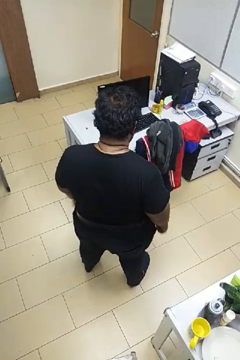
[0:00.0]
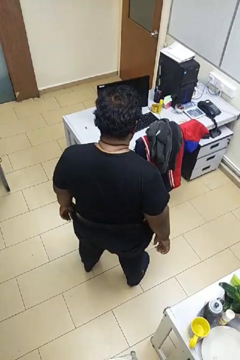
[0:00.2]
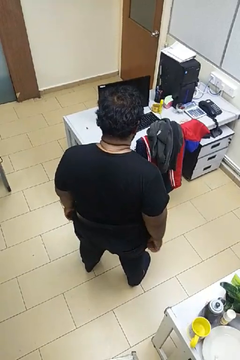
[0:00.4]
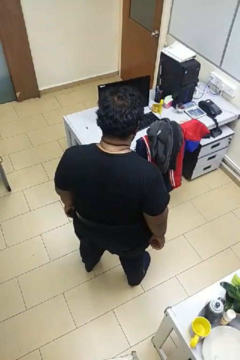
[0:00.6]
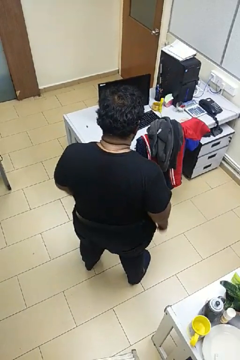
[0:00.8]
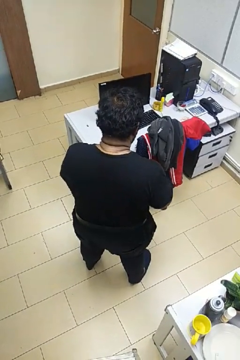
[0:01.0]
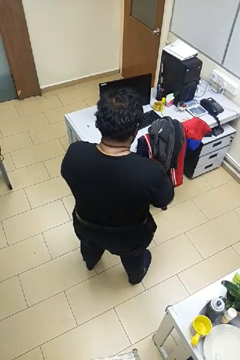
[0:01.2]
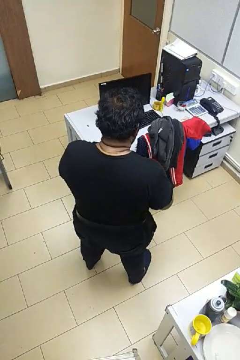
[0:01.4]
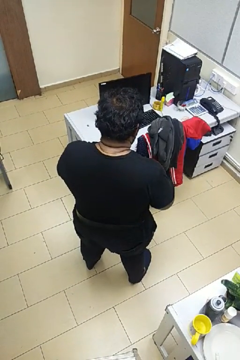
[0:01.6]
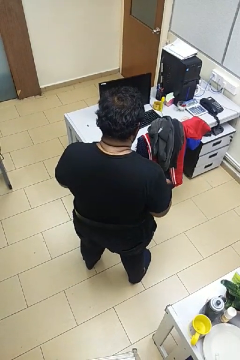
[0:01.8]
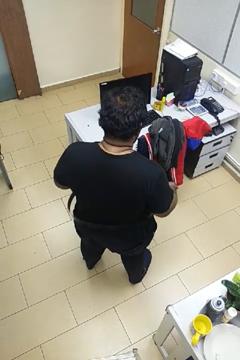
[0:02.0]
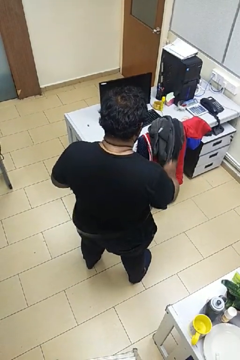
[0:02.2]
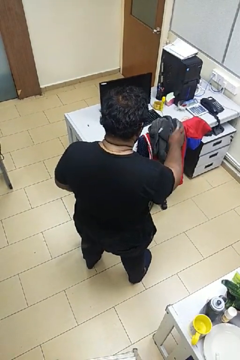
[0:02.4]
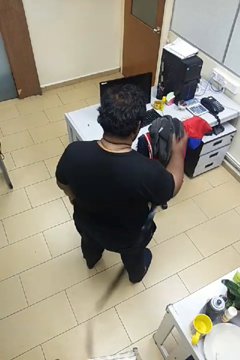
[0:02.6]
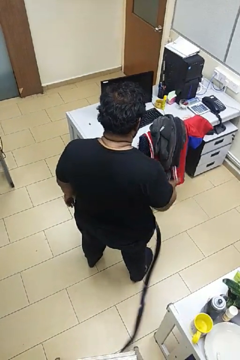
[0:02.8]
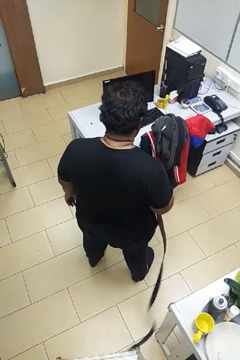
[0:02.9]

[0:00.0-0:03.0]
person takes off belt

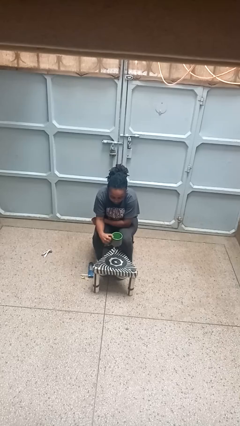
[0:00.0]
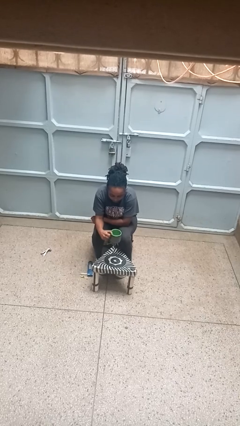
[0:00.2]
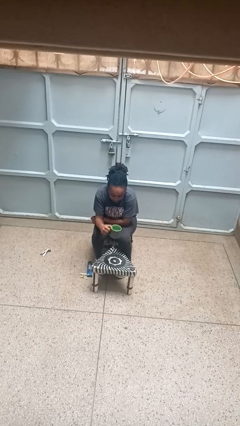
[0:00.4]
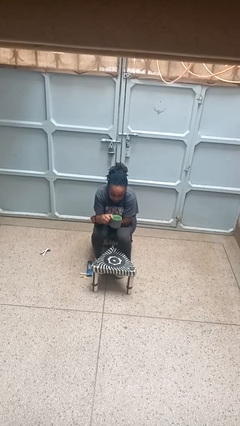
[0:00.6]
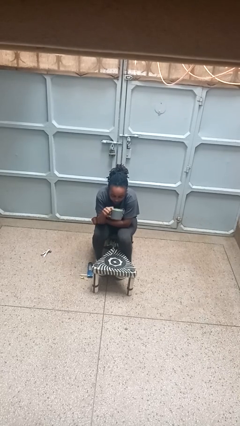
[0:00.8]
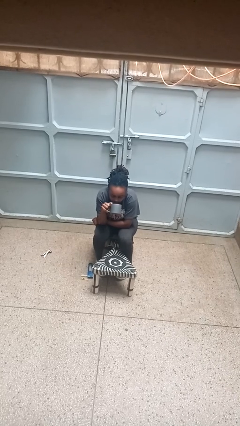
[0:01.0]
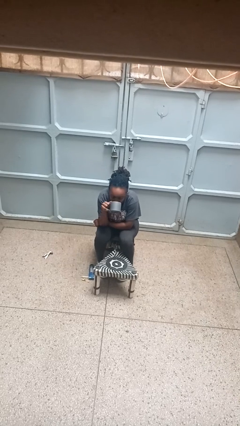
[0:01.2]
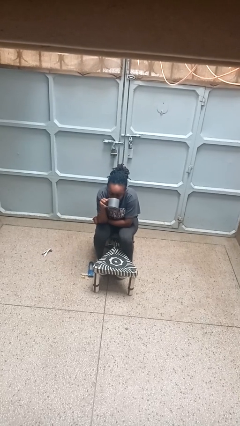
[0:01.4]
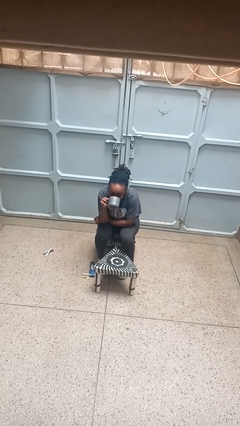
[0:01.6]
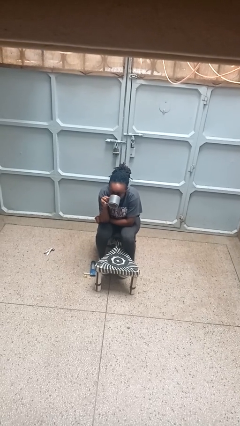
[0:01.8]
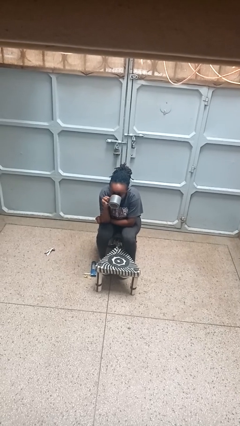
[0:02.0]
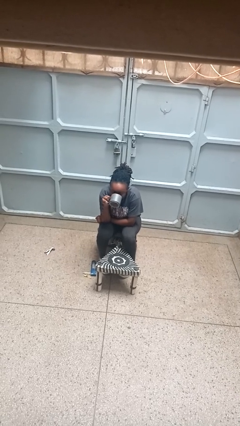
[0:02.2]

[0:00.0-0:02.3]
person drinks from mug

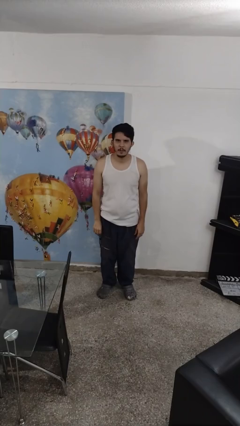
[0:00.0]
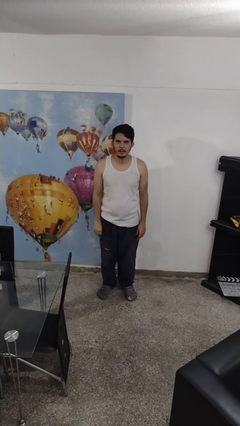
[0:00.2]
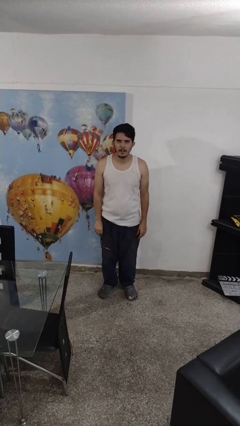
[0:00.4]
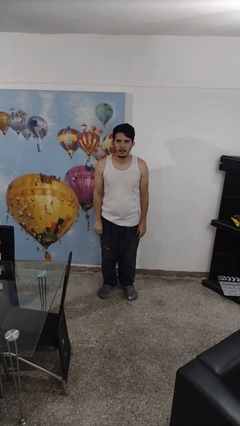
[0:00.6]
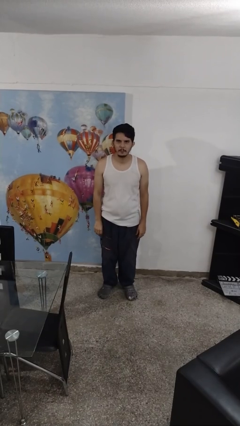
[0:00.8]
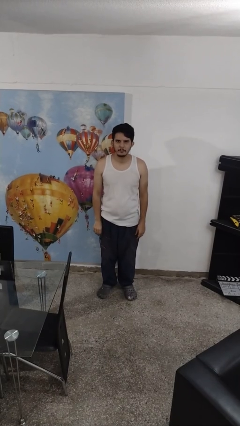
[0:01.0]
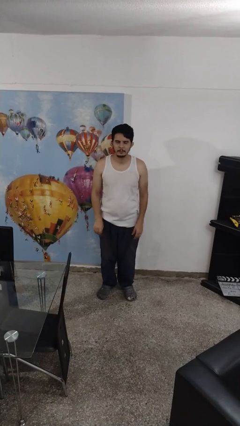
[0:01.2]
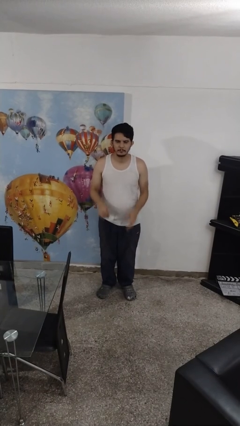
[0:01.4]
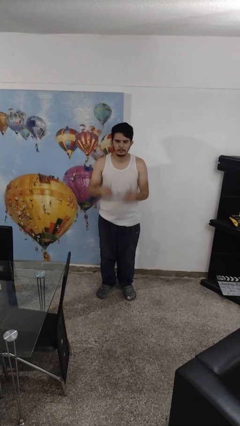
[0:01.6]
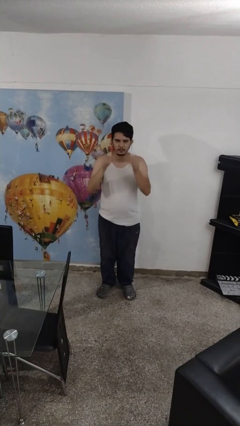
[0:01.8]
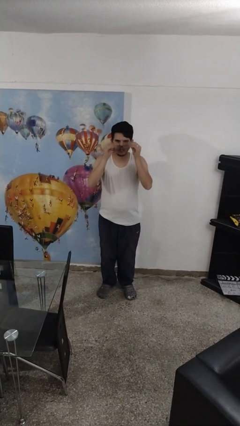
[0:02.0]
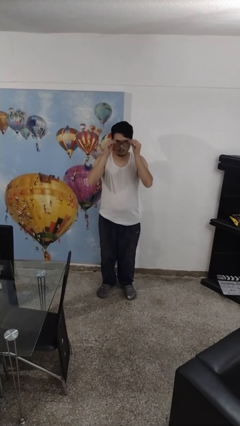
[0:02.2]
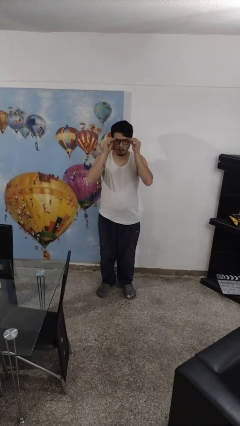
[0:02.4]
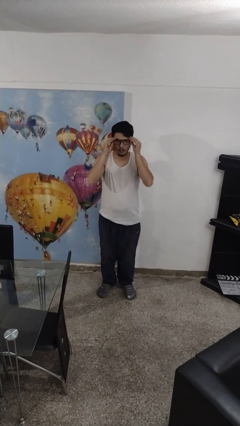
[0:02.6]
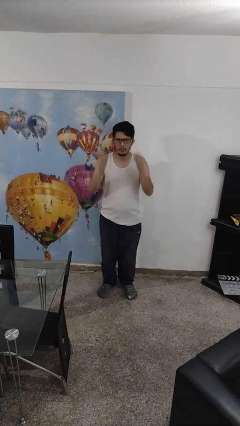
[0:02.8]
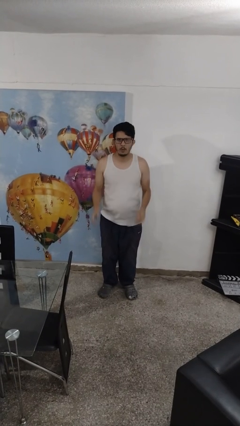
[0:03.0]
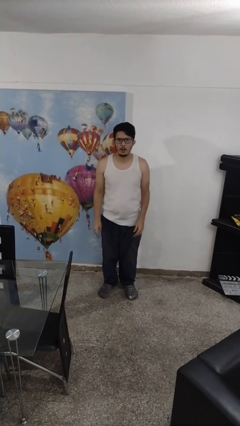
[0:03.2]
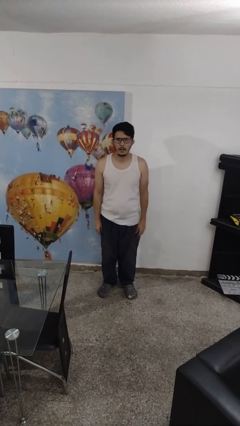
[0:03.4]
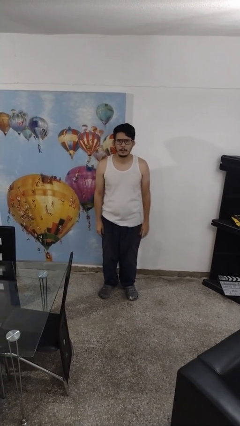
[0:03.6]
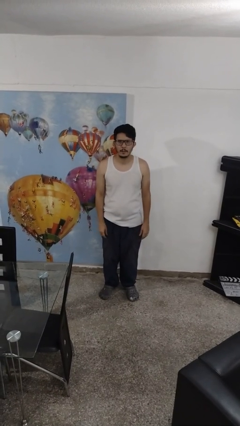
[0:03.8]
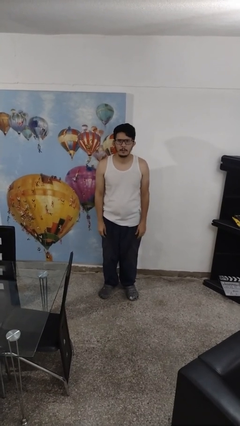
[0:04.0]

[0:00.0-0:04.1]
person puts on glasses

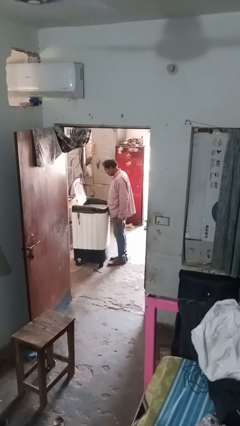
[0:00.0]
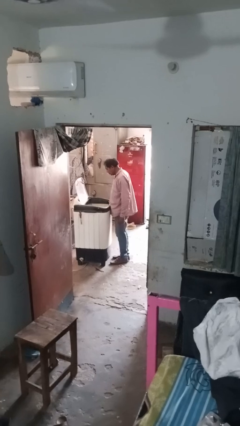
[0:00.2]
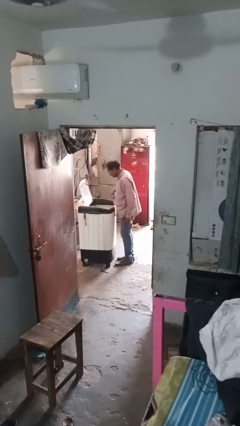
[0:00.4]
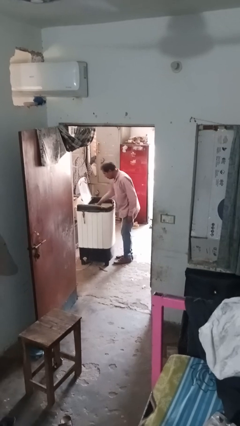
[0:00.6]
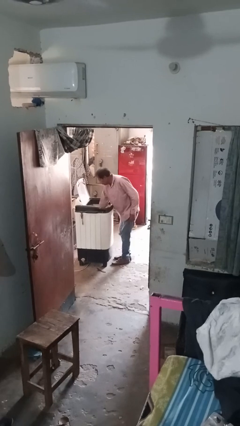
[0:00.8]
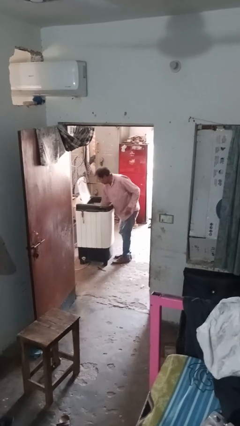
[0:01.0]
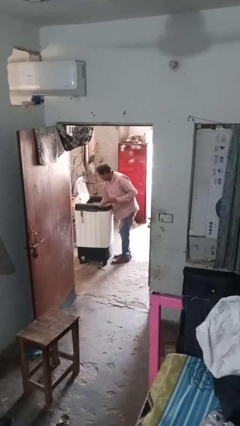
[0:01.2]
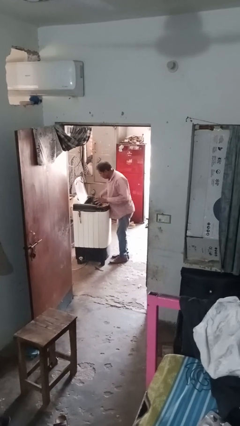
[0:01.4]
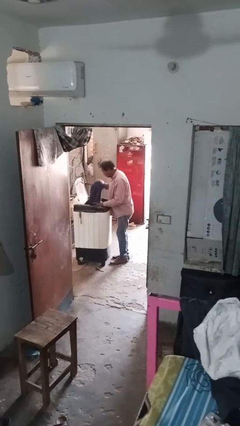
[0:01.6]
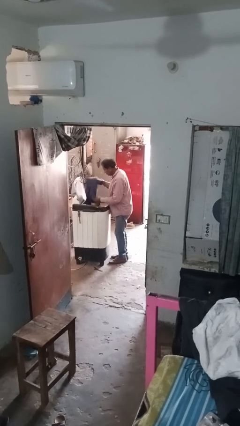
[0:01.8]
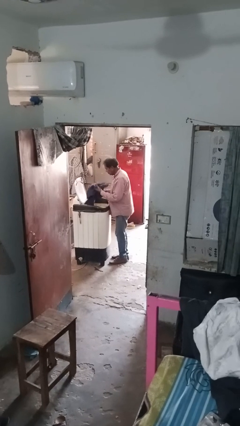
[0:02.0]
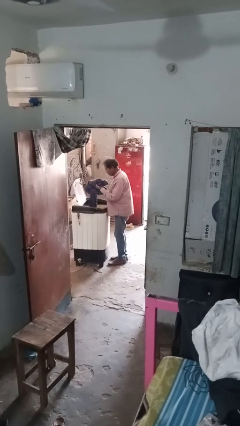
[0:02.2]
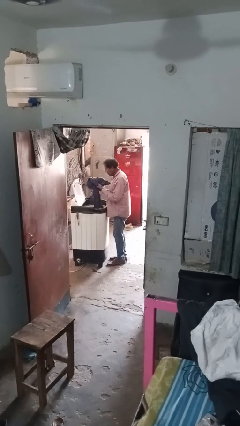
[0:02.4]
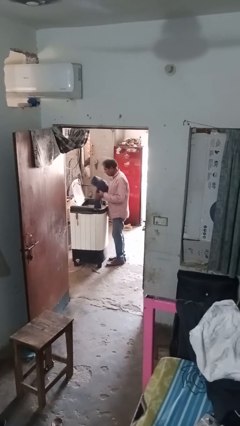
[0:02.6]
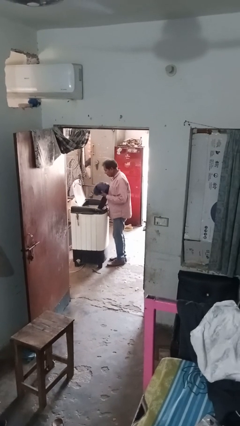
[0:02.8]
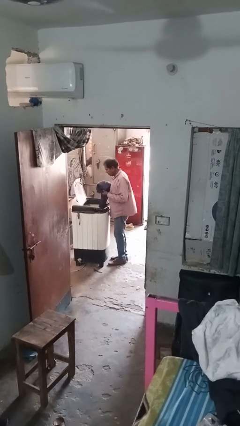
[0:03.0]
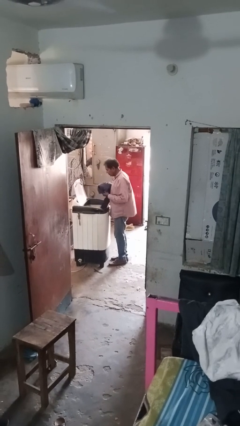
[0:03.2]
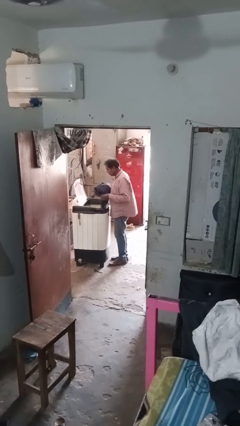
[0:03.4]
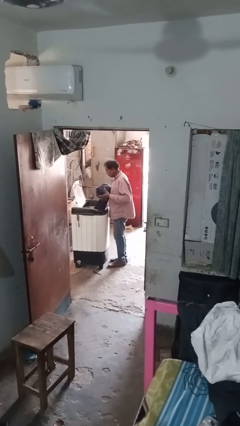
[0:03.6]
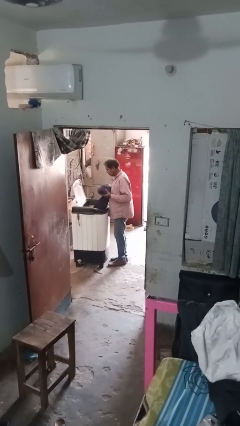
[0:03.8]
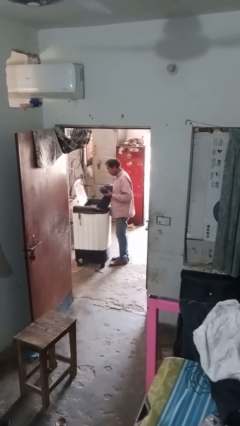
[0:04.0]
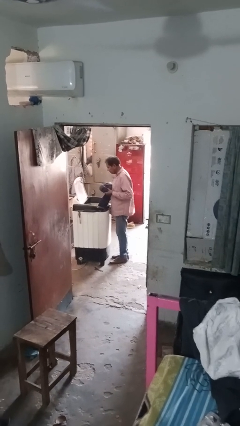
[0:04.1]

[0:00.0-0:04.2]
person unloads clotheswasher

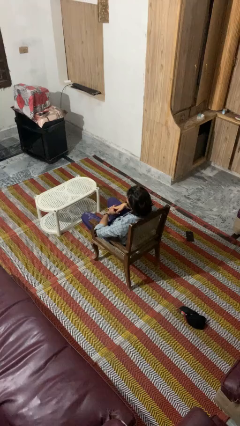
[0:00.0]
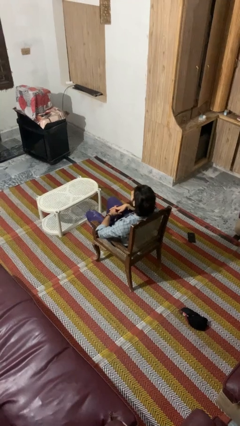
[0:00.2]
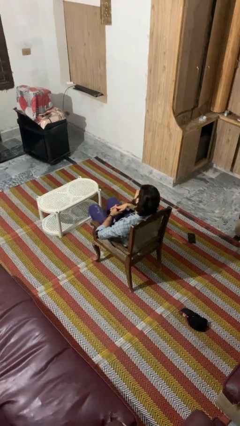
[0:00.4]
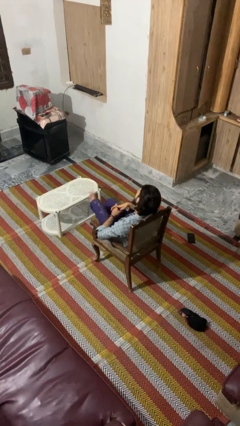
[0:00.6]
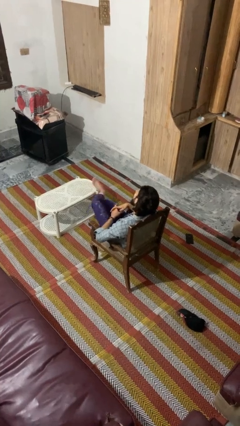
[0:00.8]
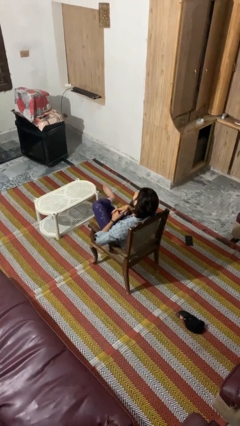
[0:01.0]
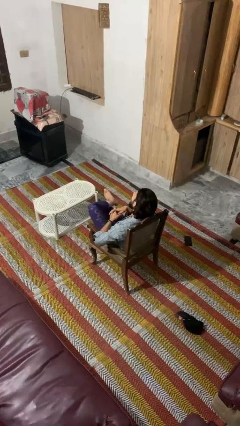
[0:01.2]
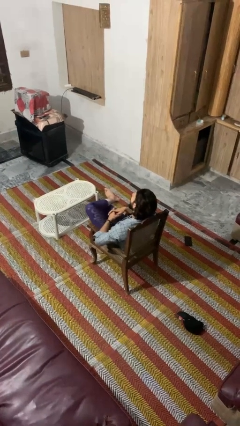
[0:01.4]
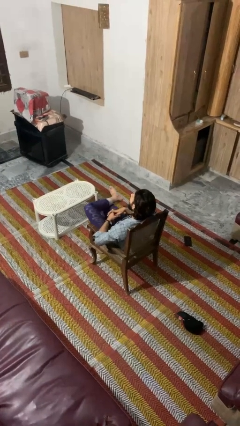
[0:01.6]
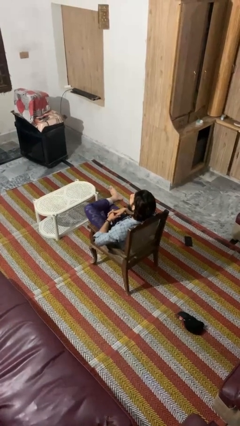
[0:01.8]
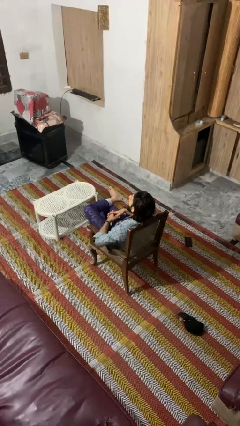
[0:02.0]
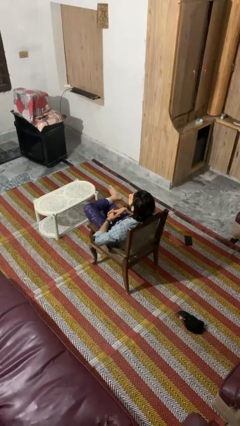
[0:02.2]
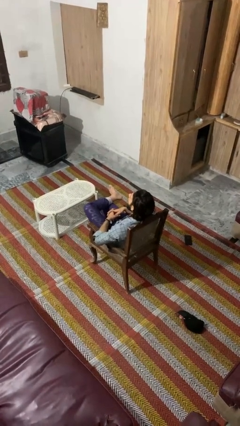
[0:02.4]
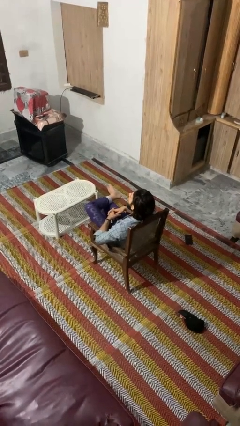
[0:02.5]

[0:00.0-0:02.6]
person crosses legs

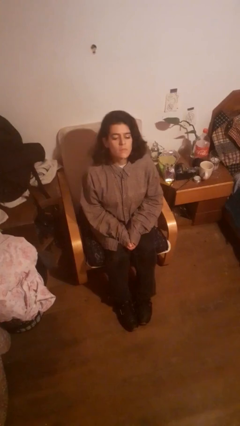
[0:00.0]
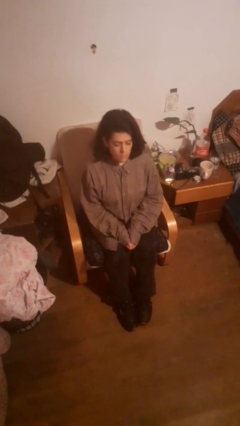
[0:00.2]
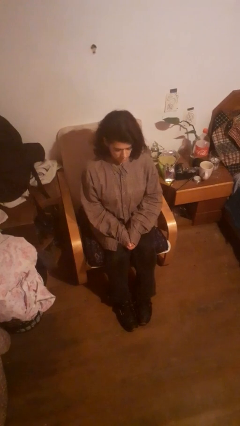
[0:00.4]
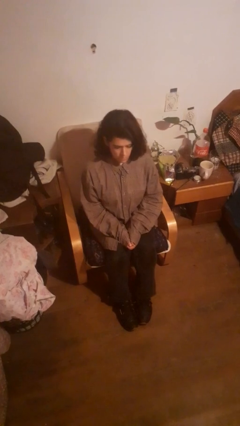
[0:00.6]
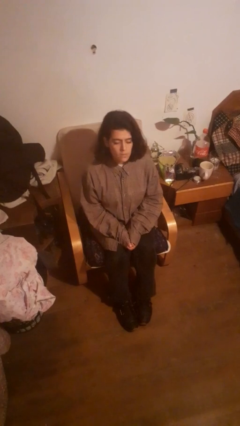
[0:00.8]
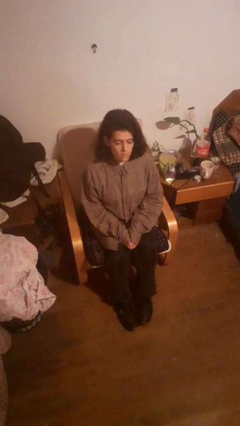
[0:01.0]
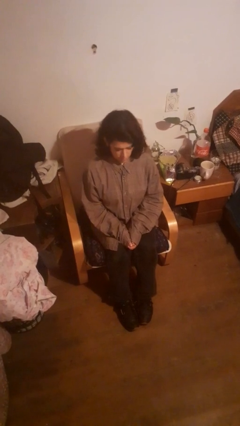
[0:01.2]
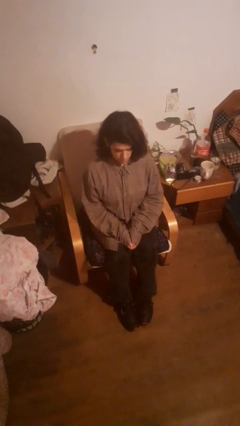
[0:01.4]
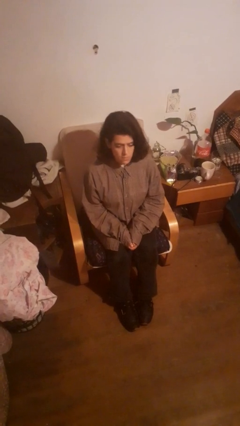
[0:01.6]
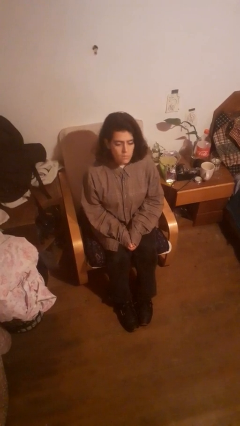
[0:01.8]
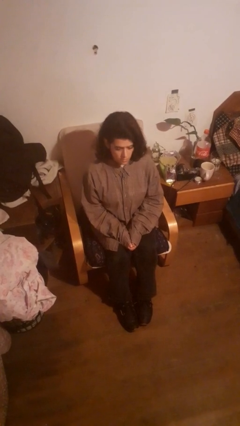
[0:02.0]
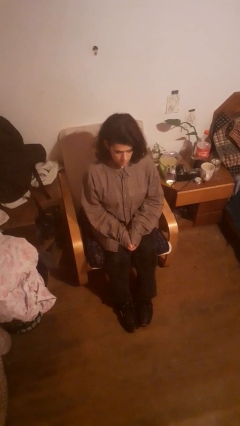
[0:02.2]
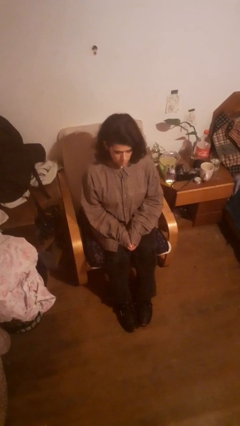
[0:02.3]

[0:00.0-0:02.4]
person nods head
